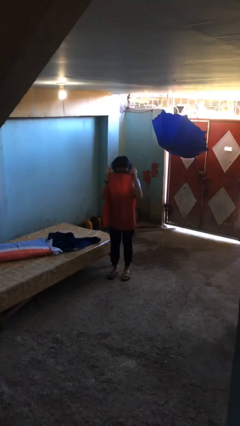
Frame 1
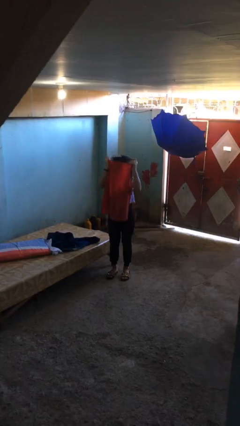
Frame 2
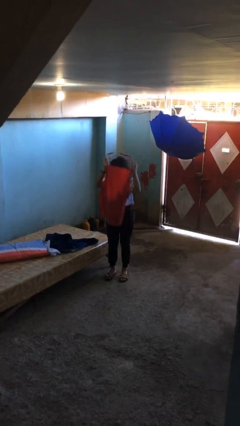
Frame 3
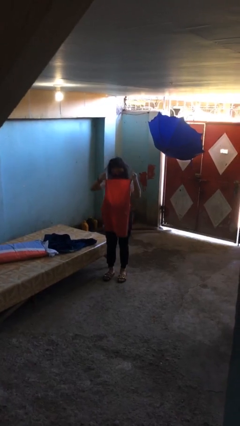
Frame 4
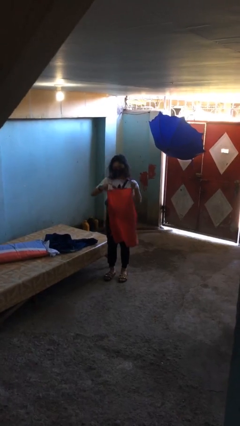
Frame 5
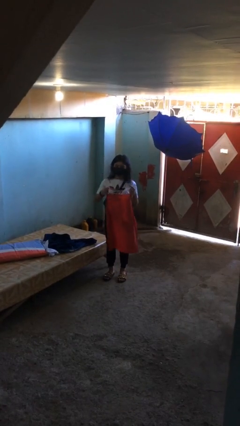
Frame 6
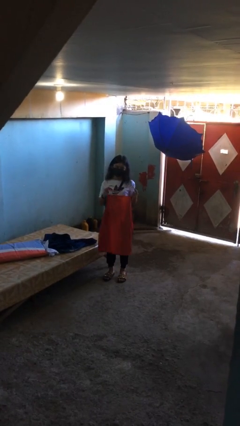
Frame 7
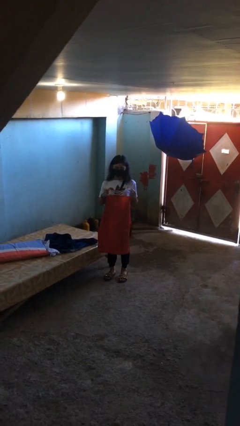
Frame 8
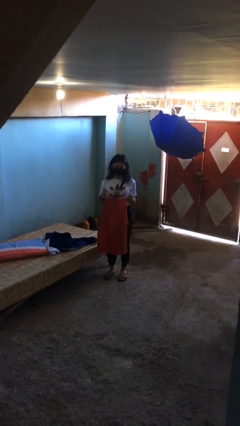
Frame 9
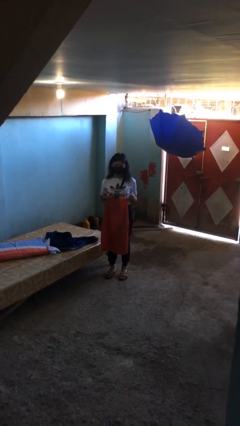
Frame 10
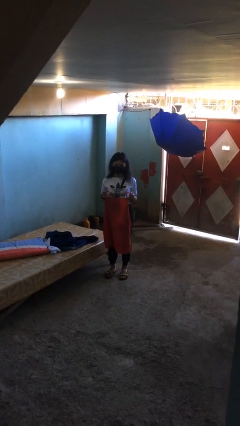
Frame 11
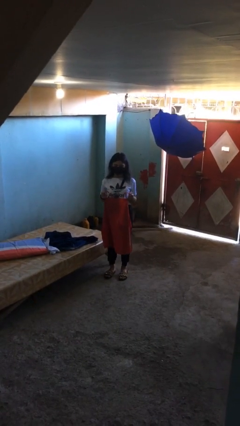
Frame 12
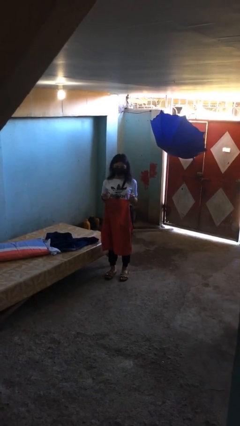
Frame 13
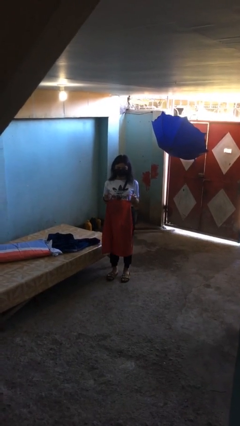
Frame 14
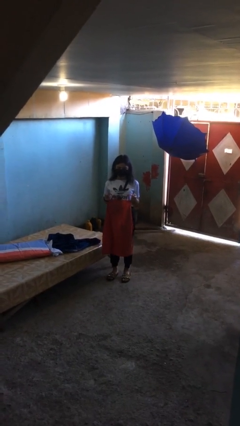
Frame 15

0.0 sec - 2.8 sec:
person takes off apron

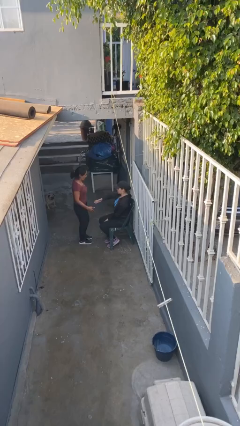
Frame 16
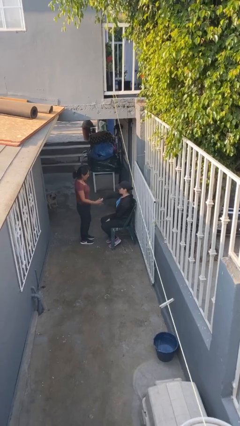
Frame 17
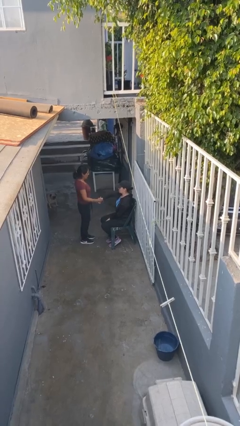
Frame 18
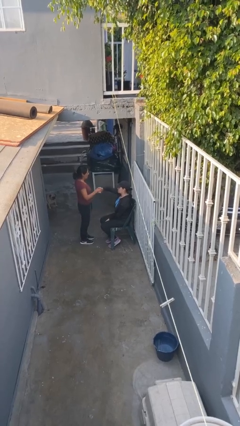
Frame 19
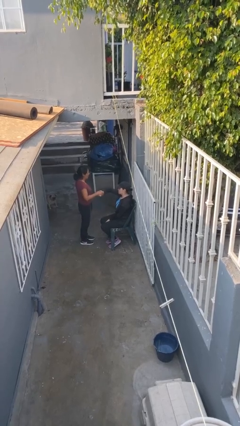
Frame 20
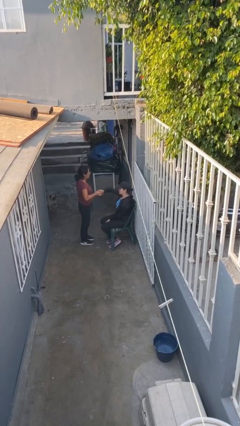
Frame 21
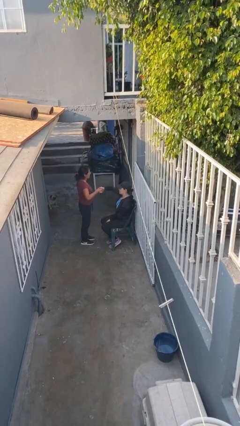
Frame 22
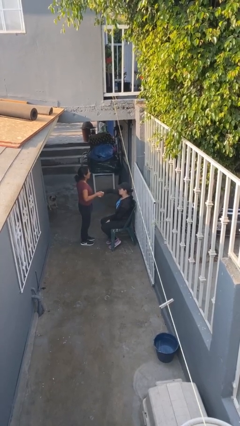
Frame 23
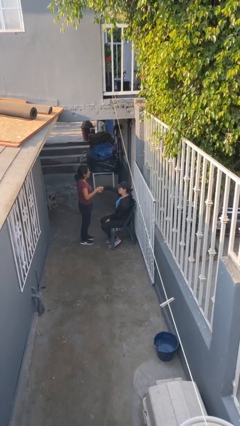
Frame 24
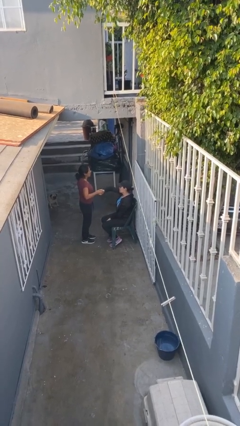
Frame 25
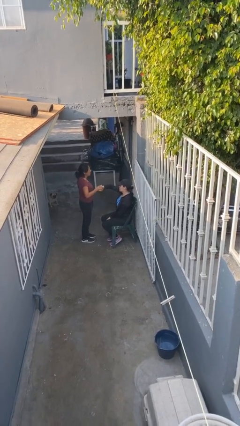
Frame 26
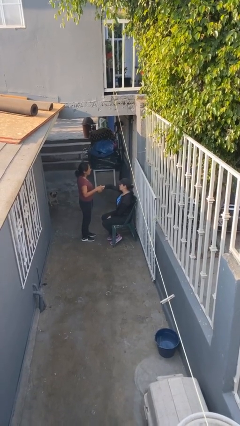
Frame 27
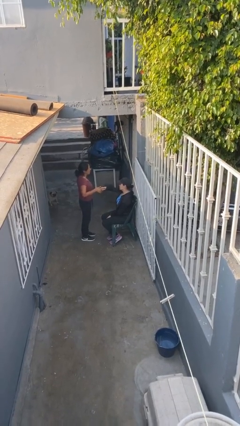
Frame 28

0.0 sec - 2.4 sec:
person shakes hand

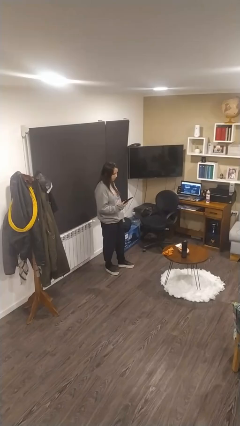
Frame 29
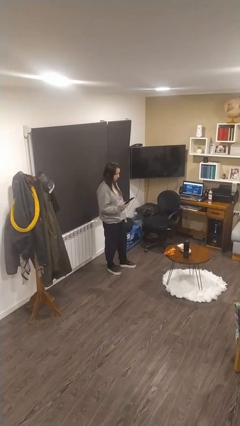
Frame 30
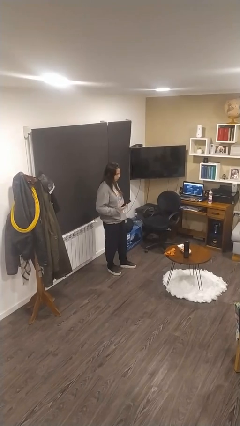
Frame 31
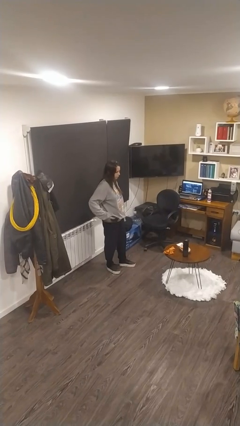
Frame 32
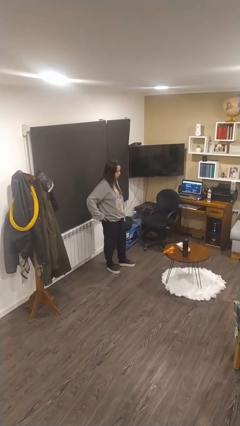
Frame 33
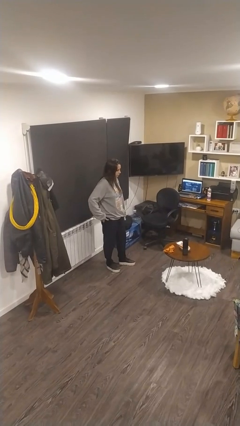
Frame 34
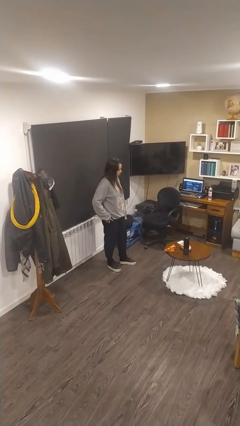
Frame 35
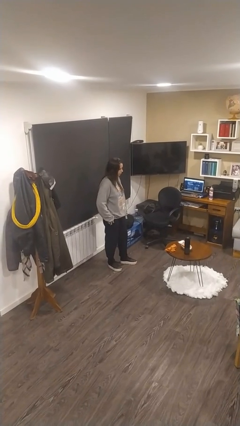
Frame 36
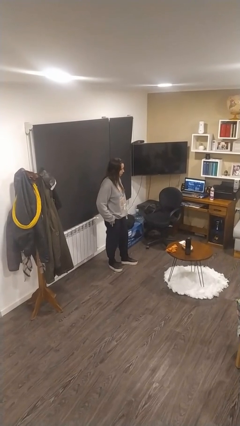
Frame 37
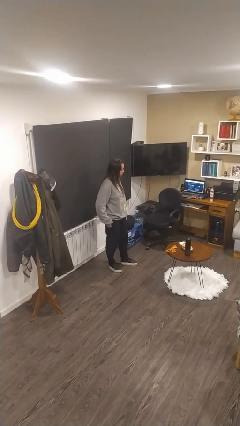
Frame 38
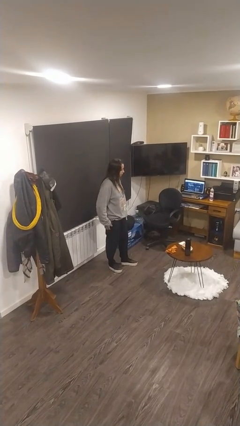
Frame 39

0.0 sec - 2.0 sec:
person puts phone into pocket

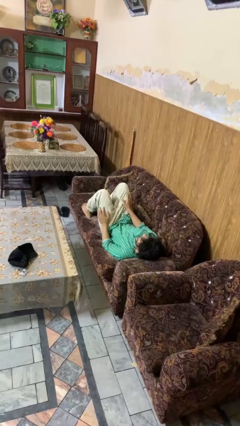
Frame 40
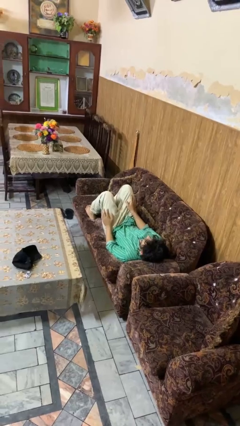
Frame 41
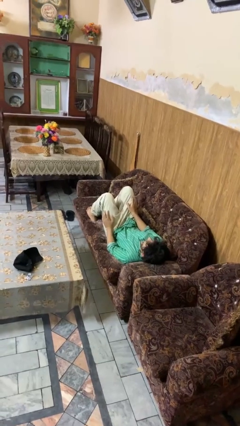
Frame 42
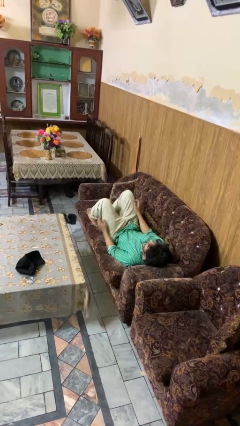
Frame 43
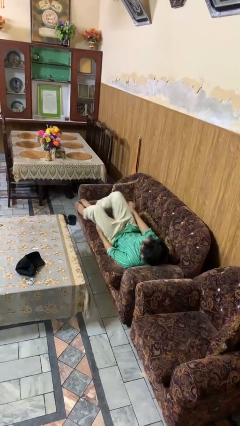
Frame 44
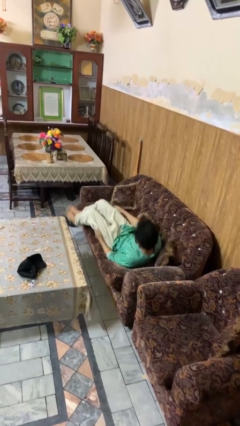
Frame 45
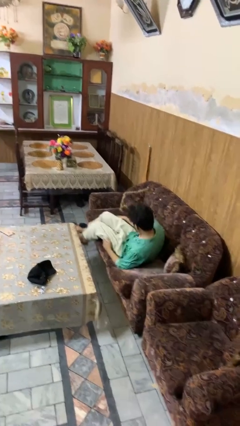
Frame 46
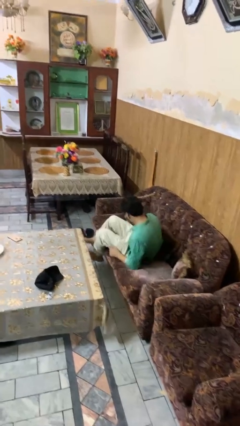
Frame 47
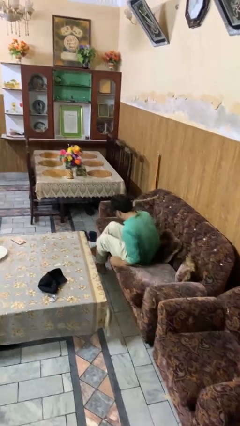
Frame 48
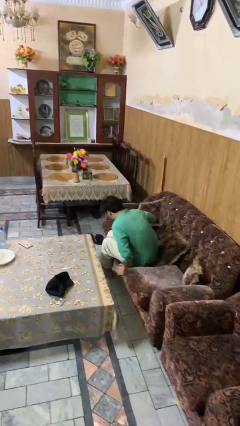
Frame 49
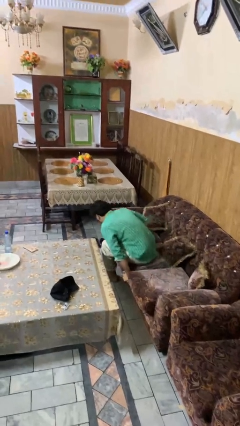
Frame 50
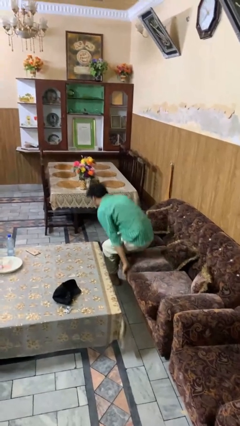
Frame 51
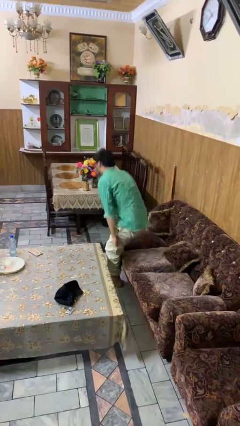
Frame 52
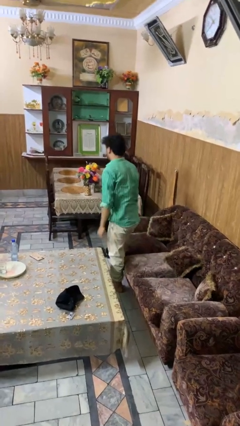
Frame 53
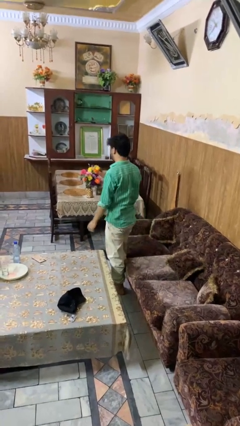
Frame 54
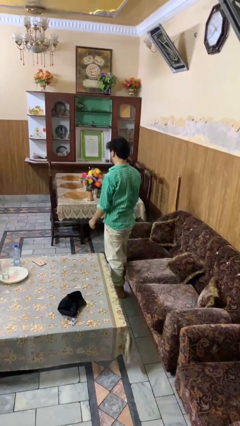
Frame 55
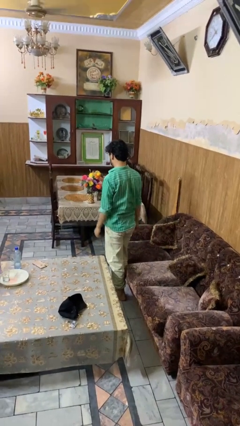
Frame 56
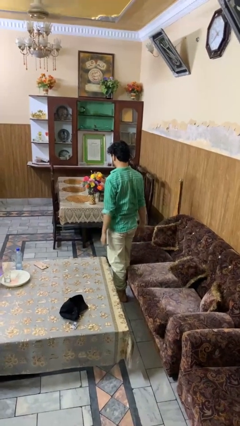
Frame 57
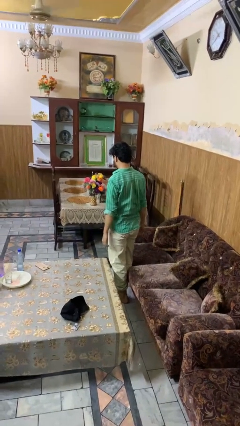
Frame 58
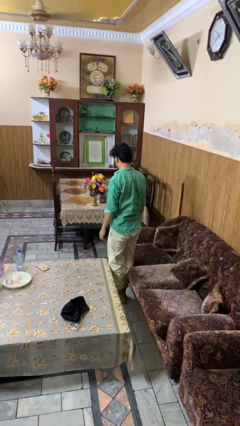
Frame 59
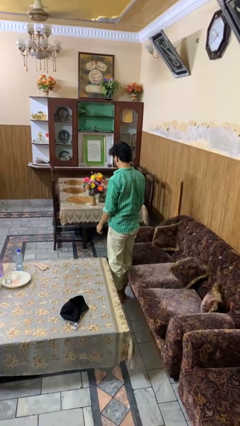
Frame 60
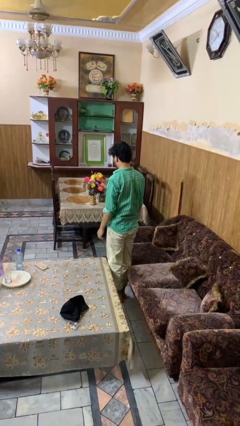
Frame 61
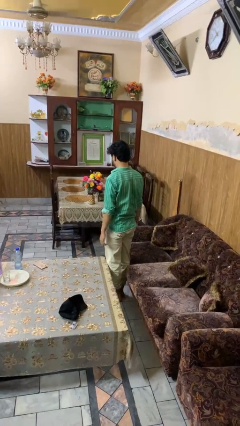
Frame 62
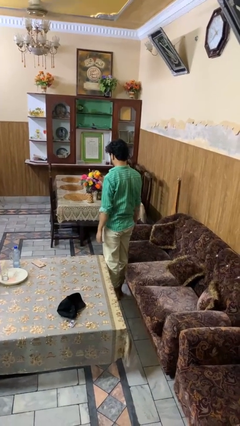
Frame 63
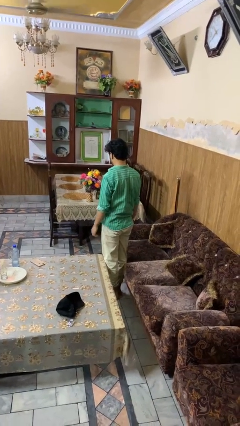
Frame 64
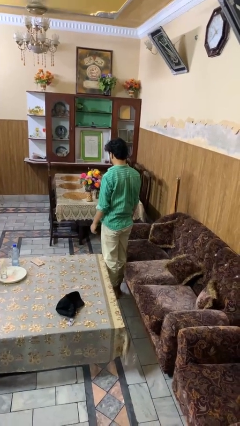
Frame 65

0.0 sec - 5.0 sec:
person stands up

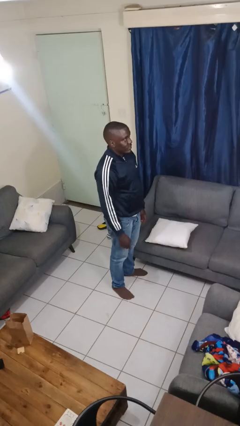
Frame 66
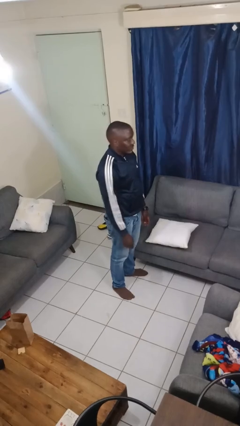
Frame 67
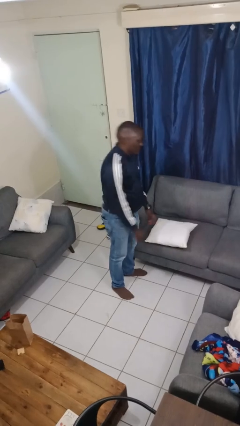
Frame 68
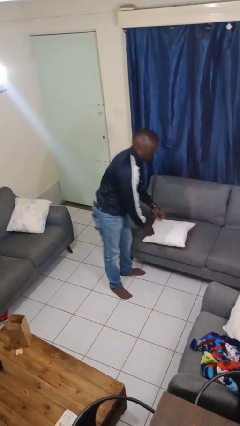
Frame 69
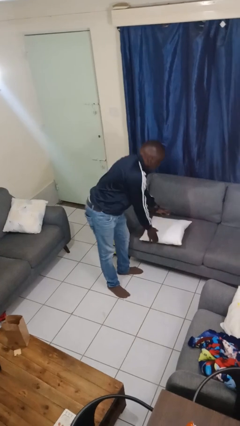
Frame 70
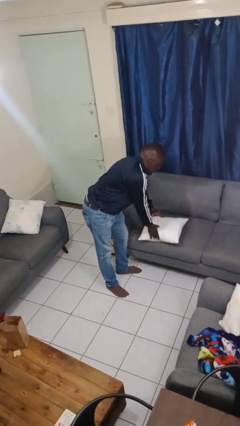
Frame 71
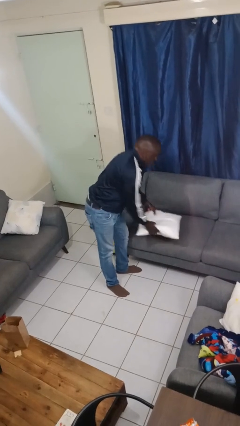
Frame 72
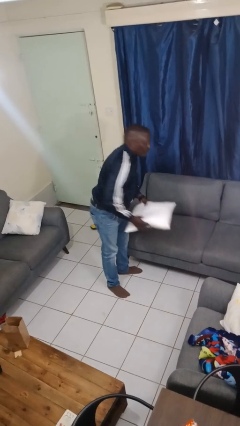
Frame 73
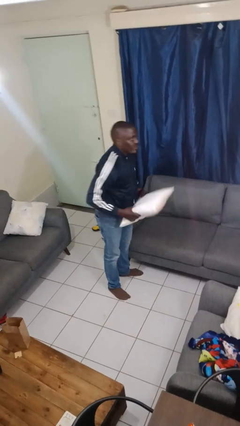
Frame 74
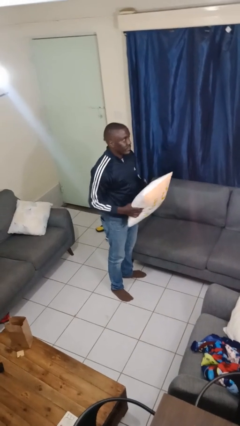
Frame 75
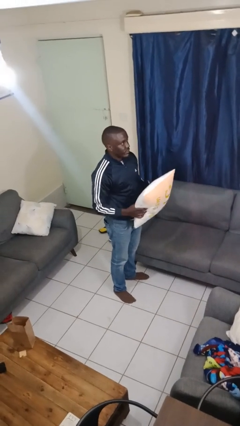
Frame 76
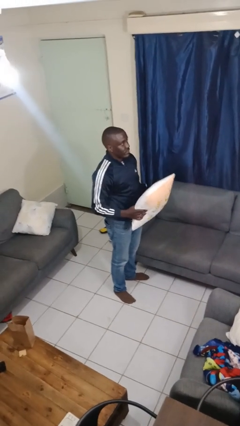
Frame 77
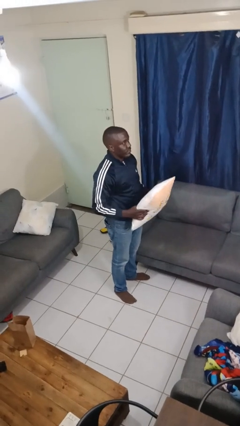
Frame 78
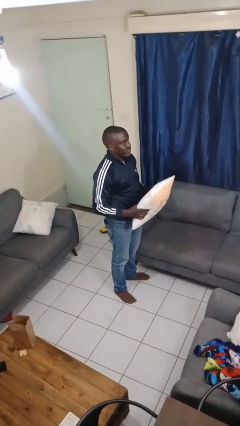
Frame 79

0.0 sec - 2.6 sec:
person picks up object from couch

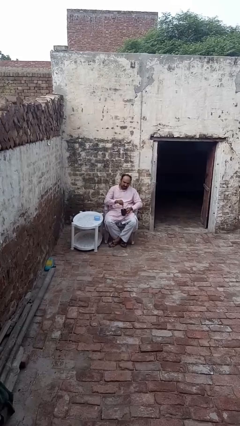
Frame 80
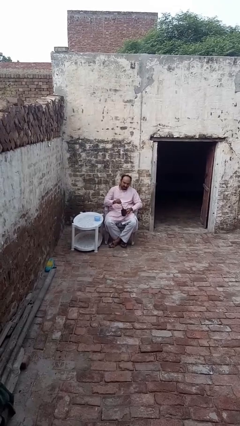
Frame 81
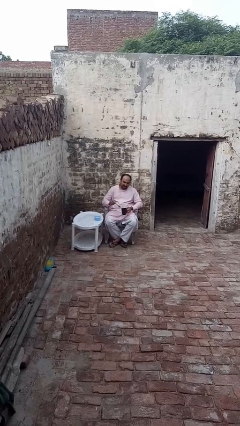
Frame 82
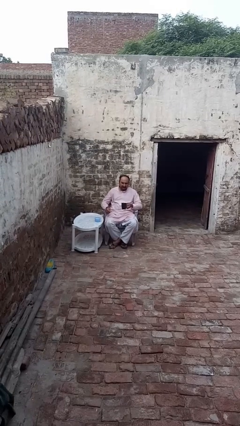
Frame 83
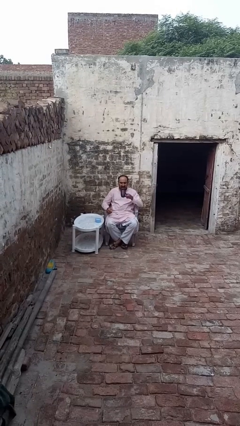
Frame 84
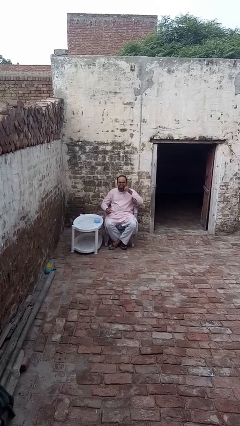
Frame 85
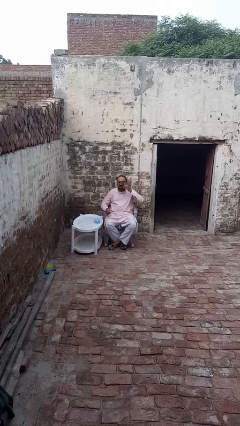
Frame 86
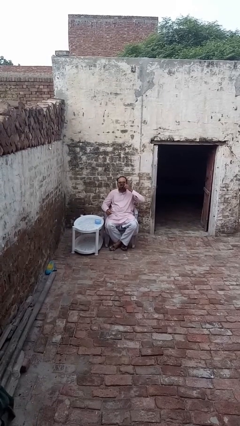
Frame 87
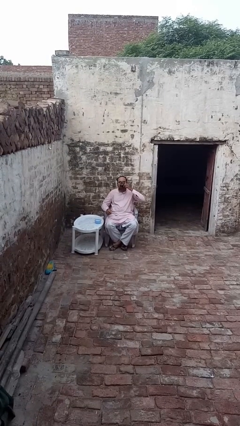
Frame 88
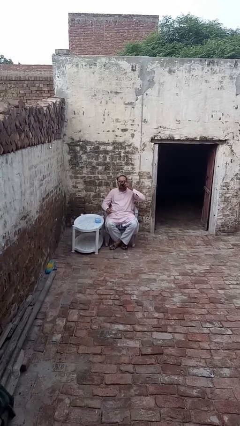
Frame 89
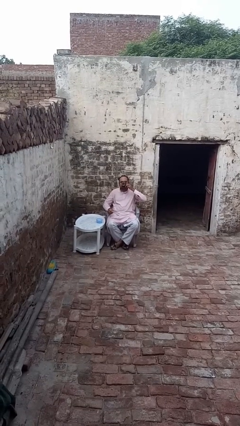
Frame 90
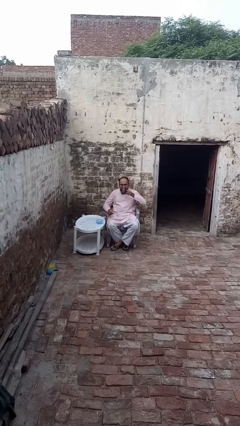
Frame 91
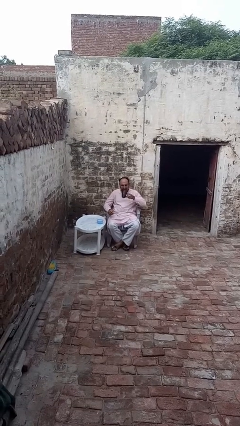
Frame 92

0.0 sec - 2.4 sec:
person drinks from mug
